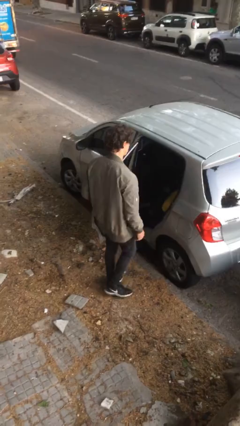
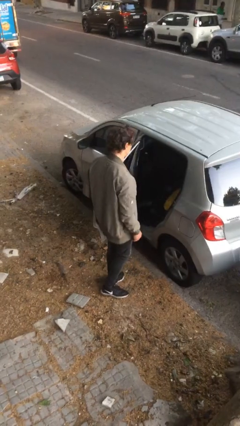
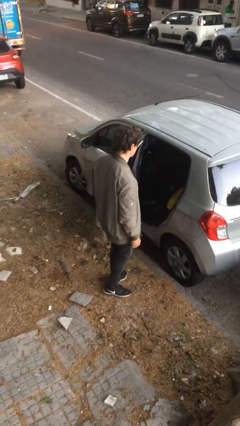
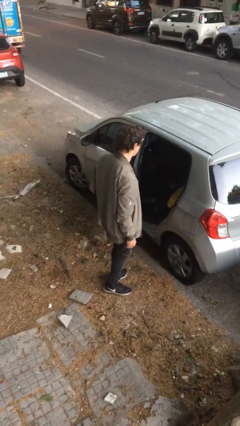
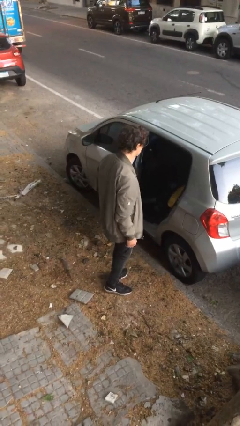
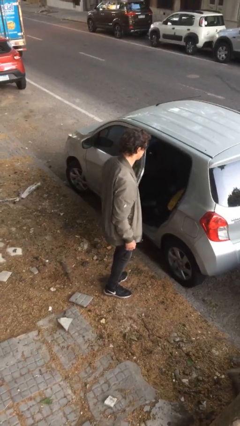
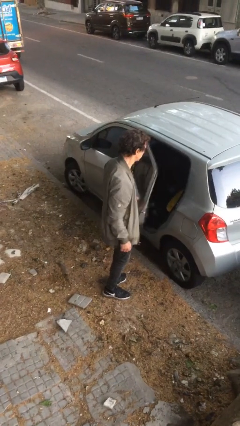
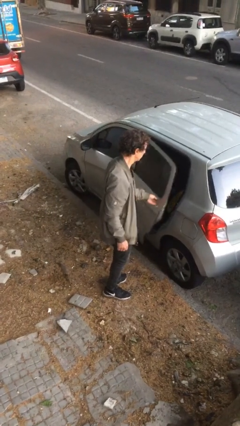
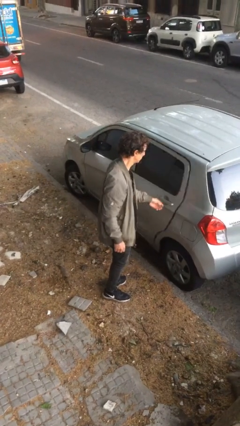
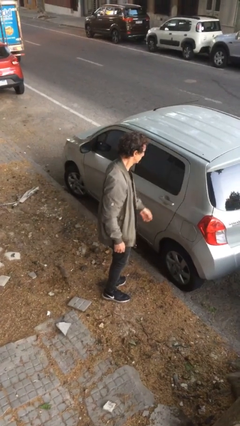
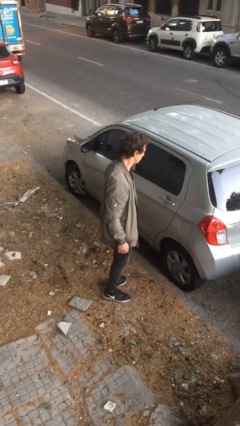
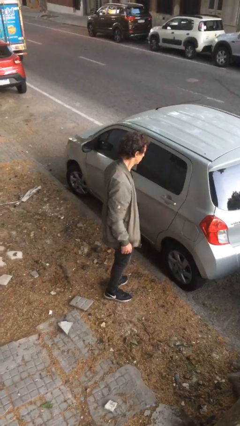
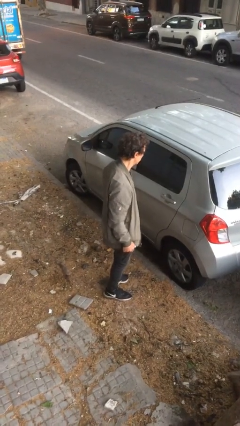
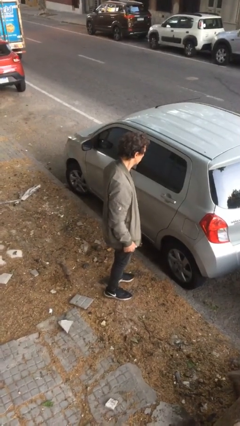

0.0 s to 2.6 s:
person closes car door

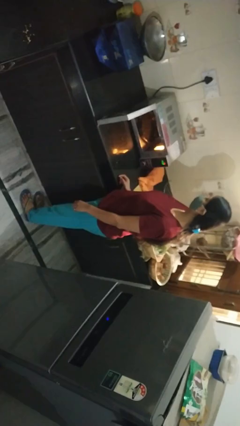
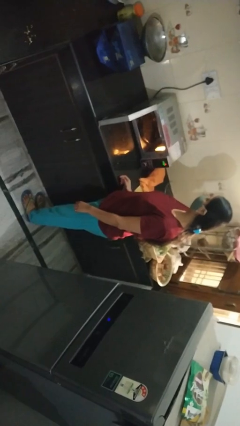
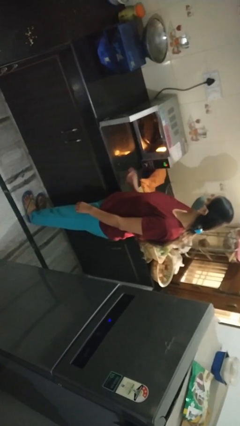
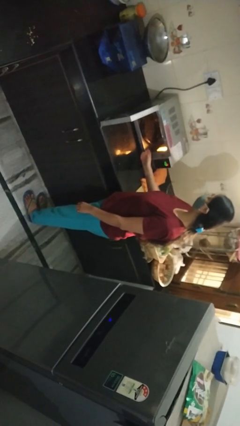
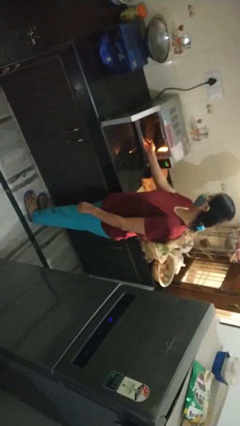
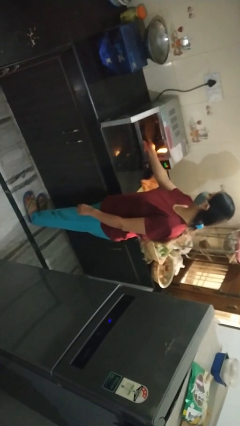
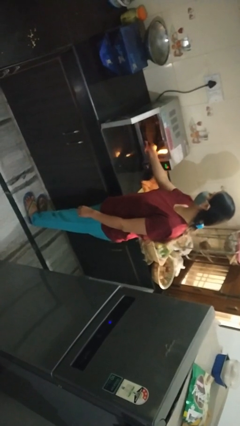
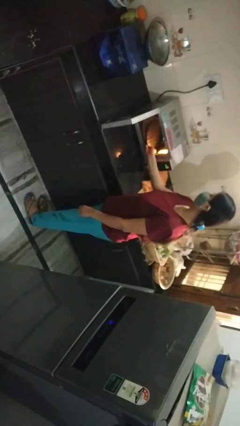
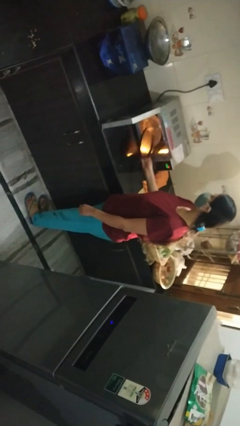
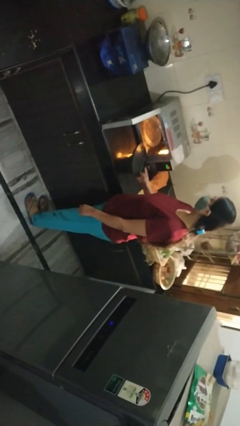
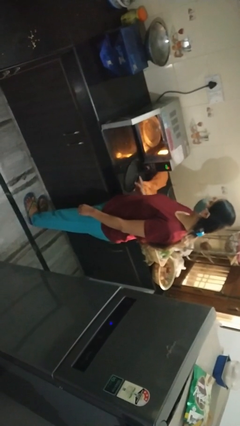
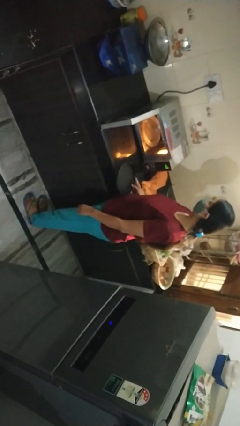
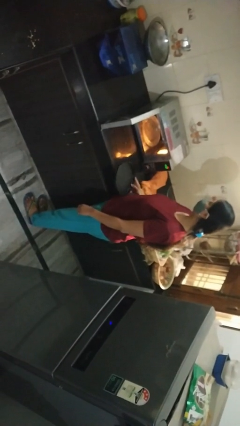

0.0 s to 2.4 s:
person takes object from microwave

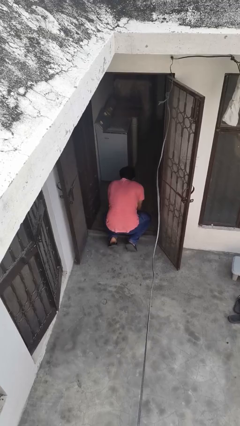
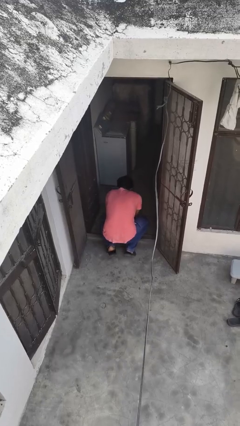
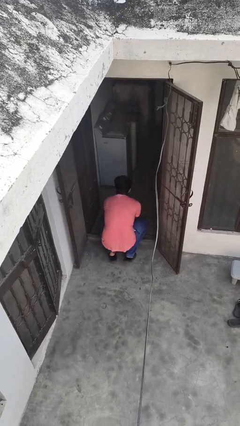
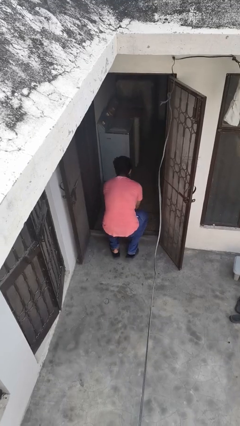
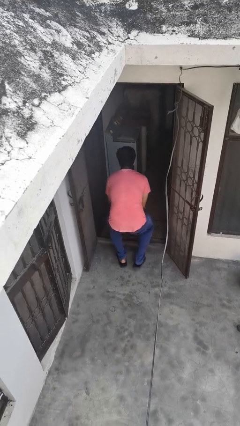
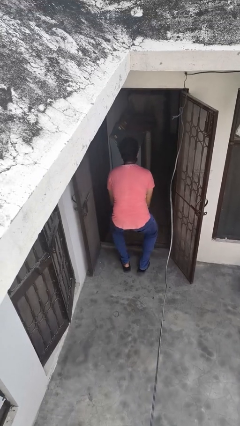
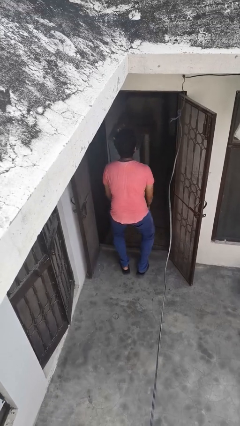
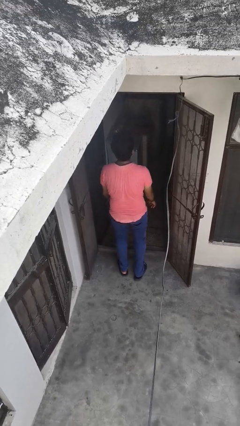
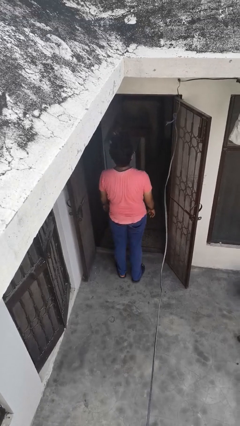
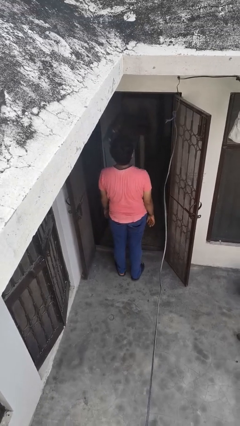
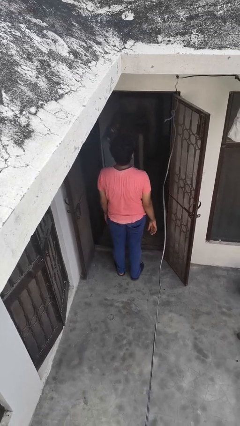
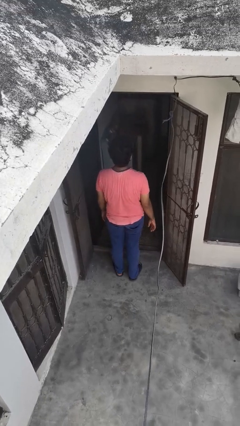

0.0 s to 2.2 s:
person stands up from floor

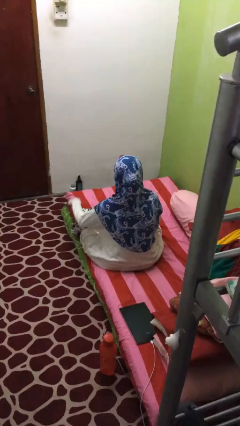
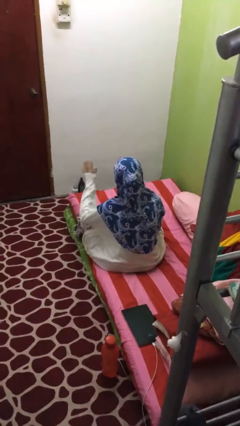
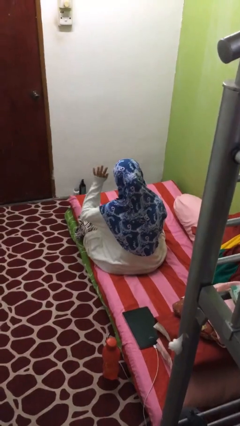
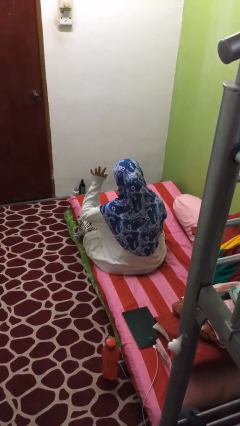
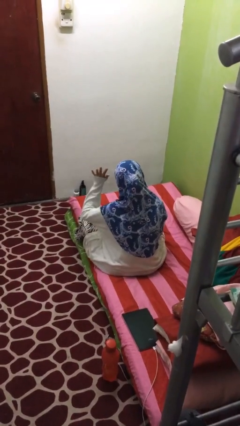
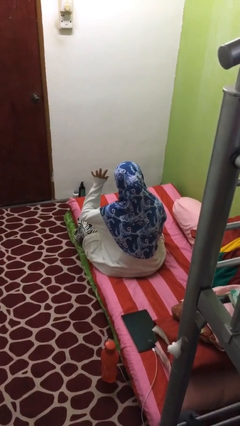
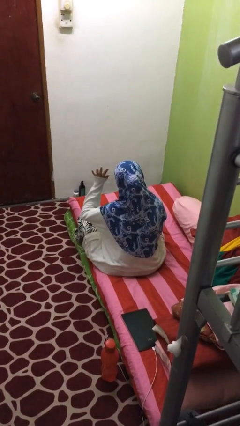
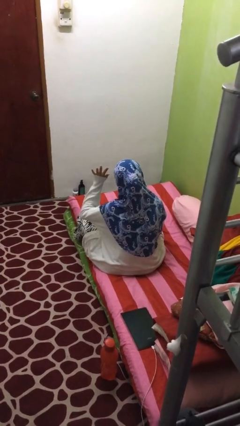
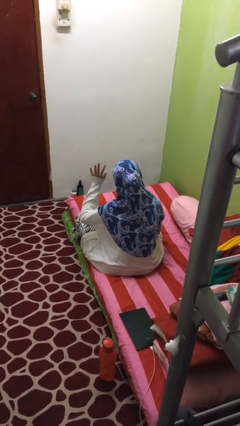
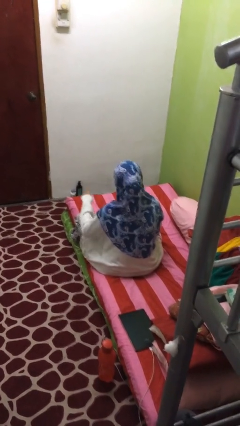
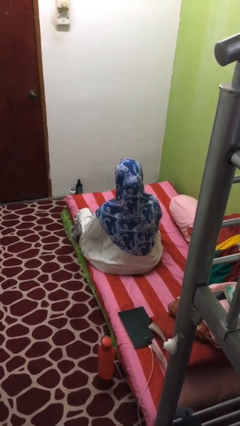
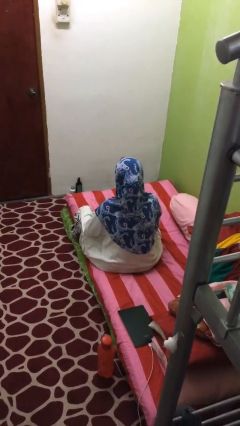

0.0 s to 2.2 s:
person gestures number five

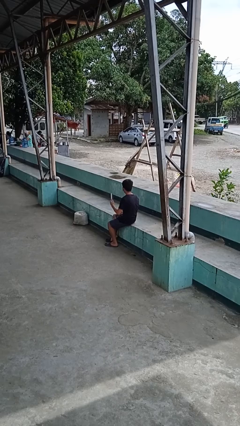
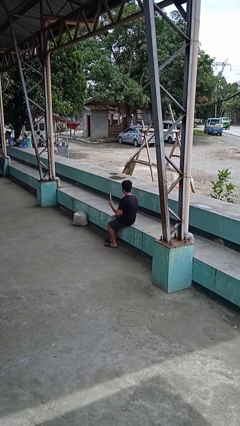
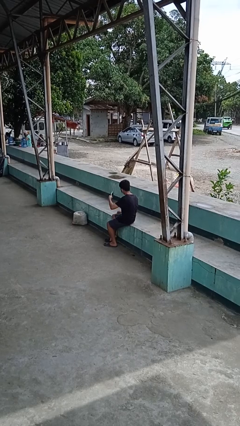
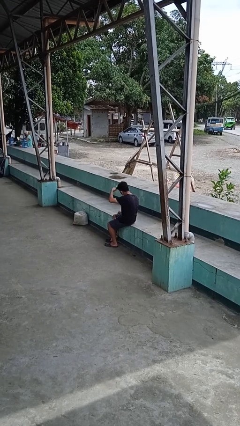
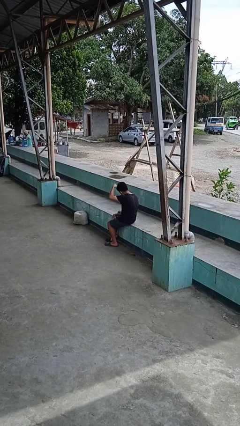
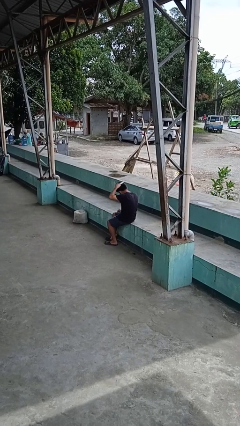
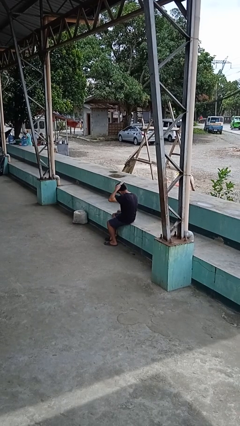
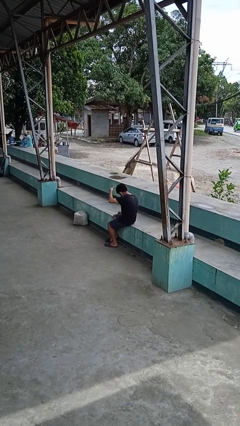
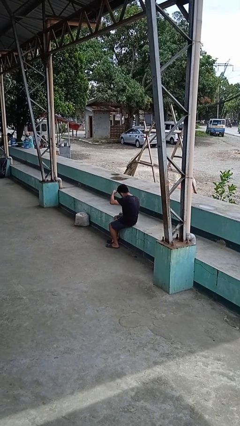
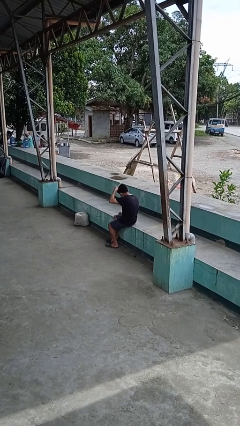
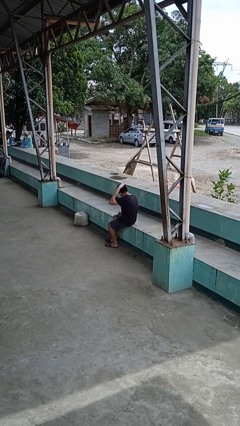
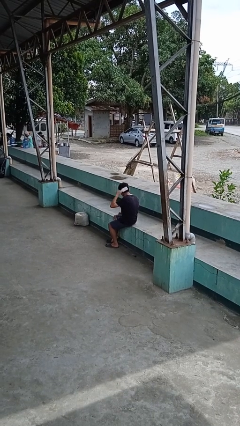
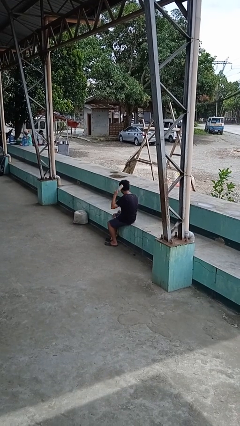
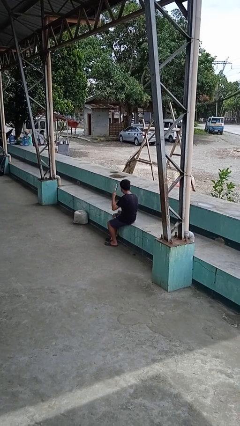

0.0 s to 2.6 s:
person brushes hair

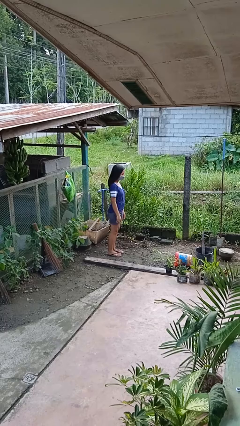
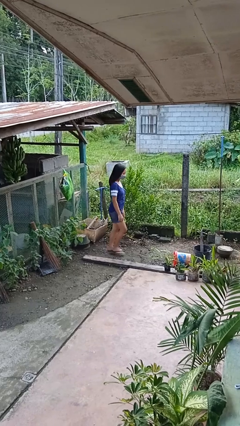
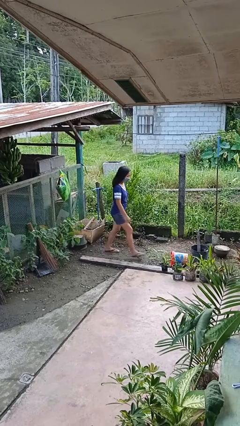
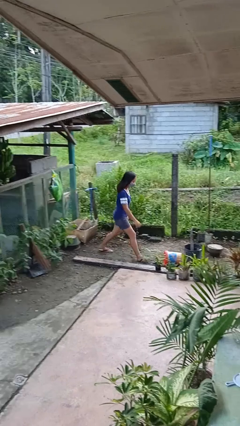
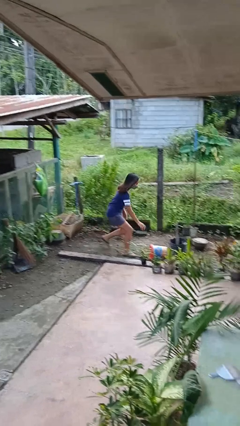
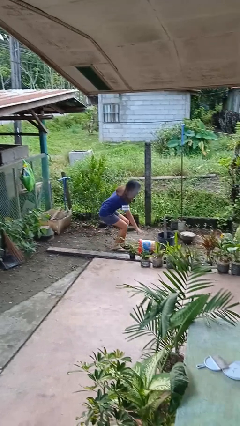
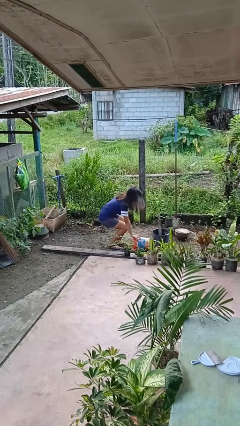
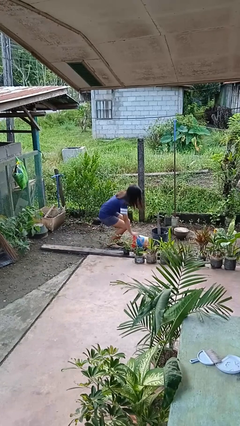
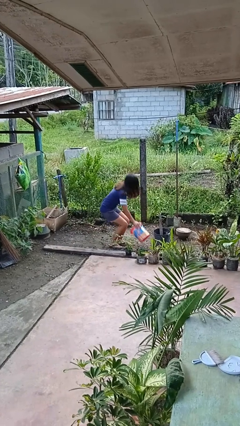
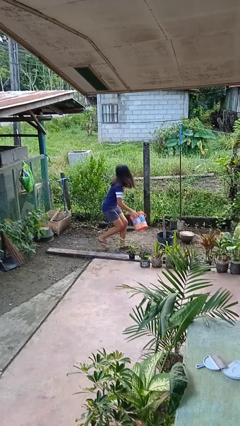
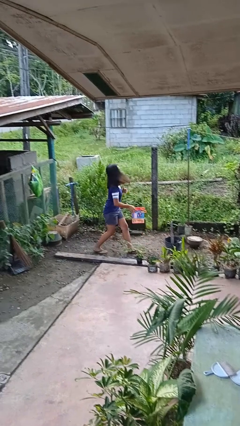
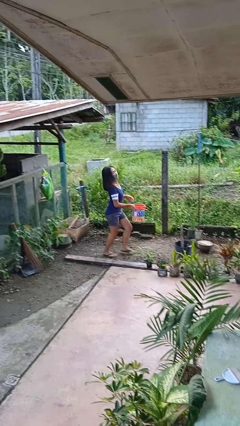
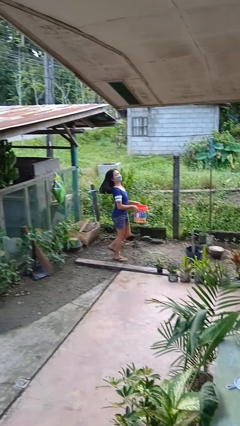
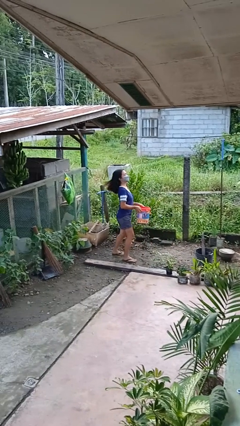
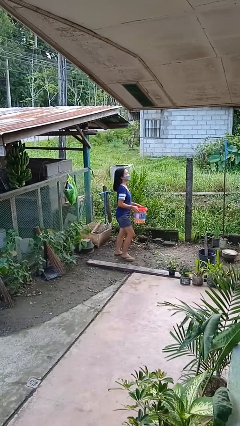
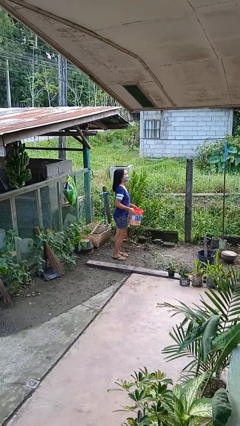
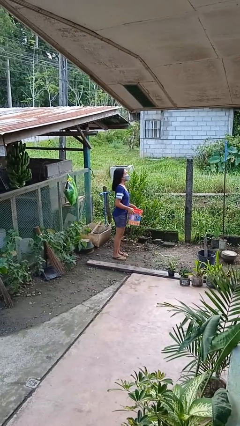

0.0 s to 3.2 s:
person picks up object from floor

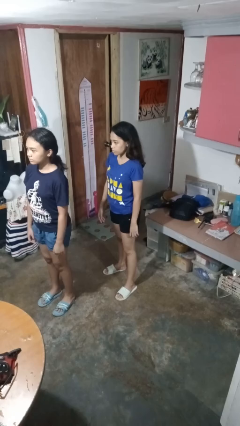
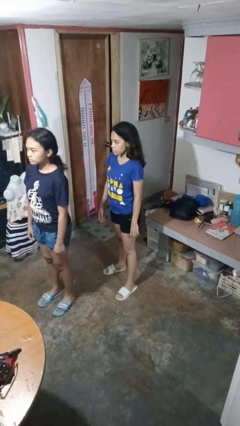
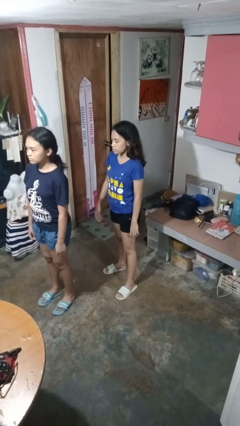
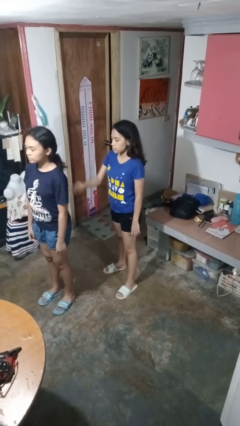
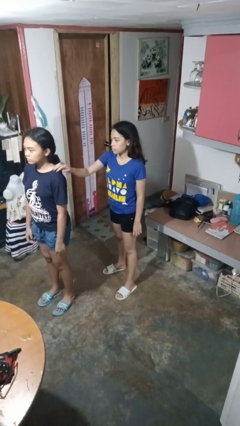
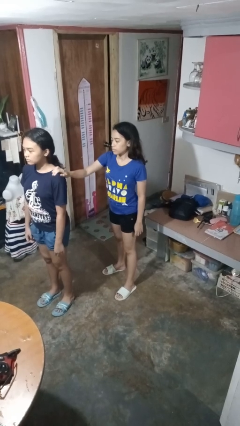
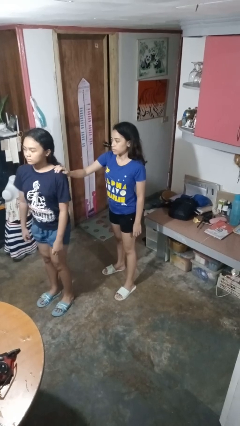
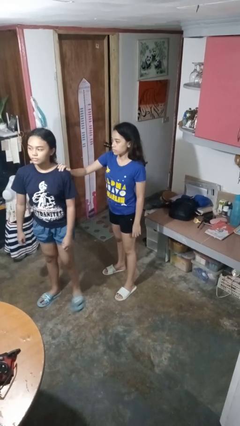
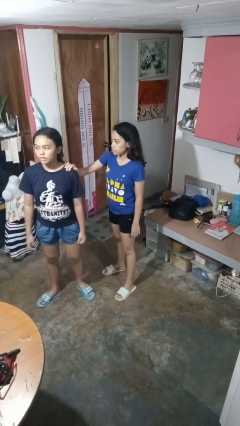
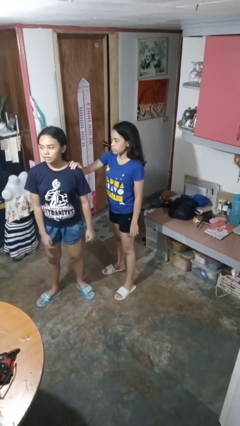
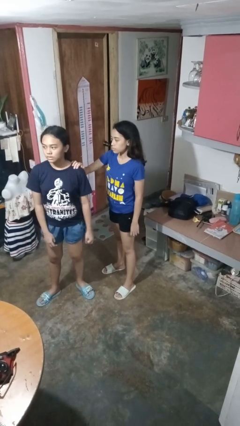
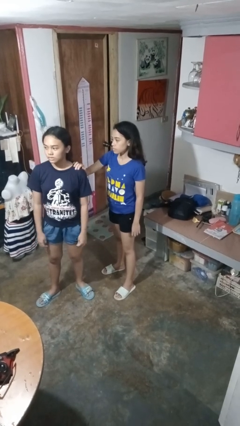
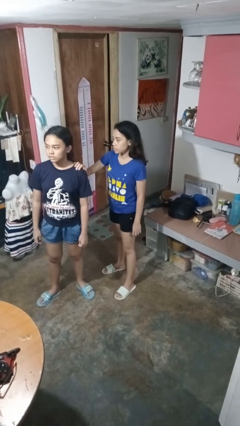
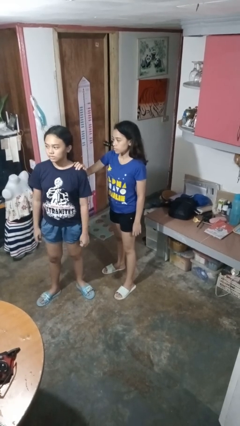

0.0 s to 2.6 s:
person grabs person by shoulder
